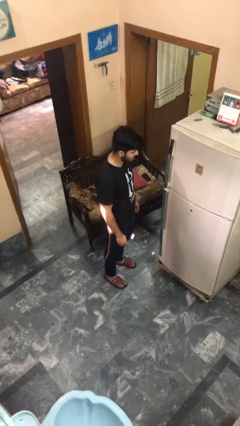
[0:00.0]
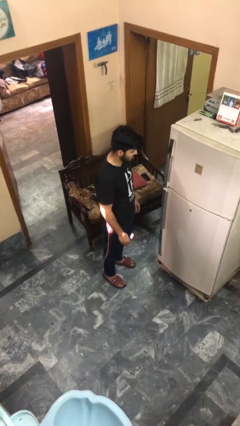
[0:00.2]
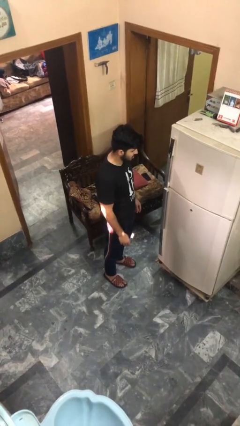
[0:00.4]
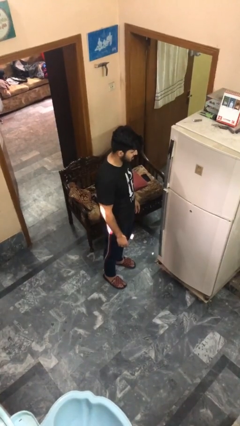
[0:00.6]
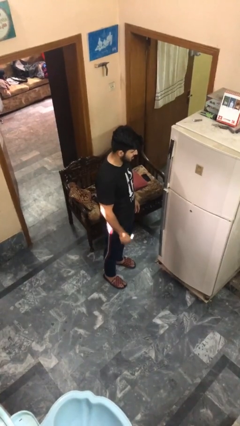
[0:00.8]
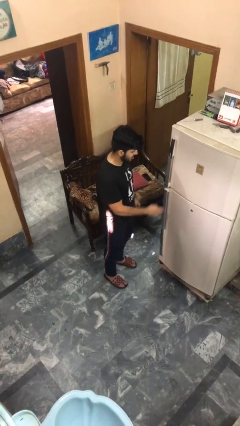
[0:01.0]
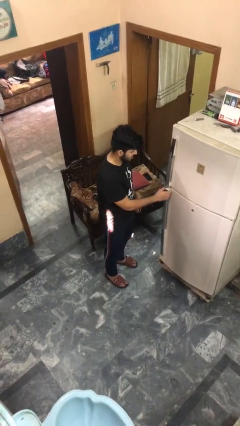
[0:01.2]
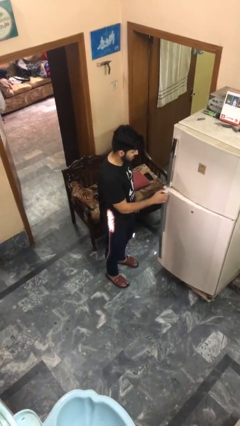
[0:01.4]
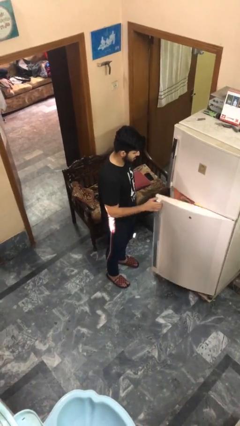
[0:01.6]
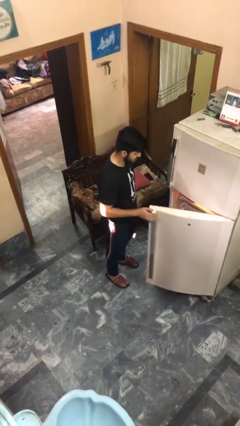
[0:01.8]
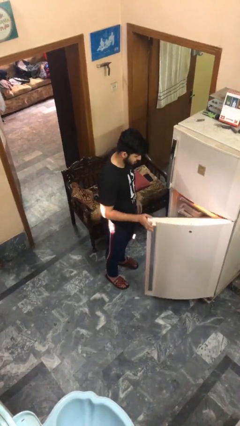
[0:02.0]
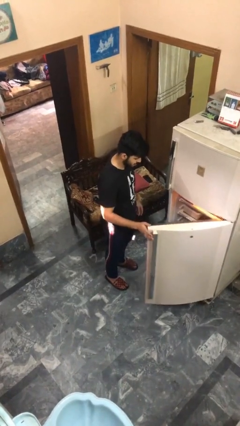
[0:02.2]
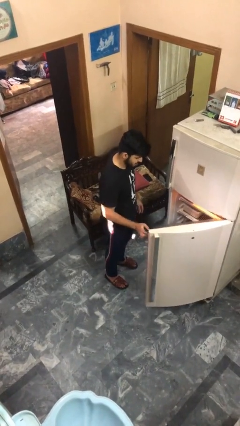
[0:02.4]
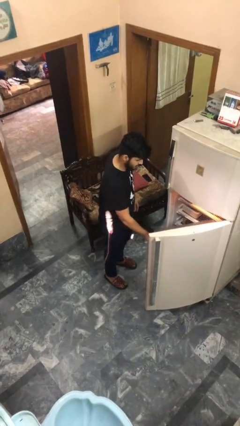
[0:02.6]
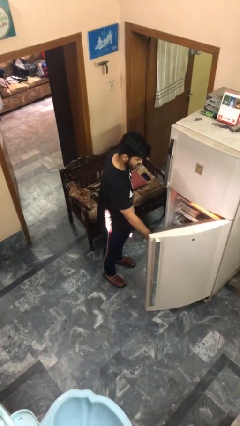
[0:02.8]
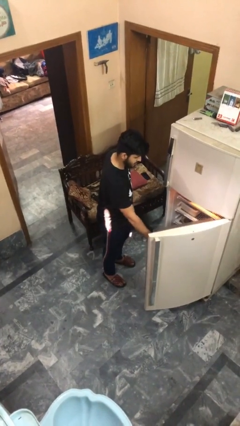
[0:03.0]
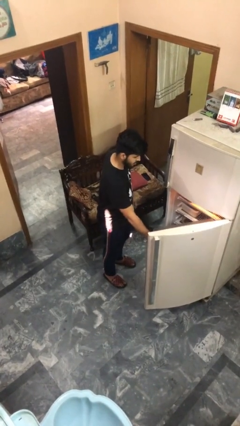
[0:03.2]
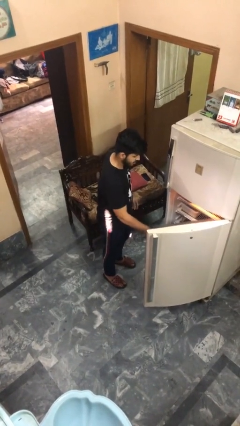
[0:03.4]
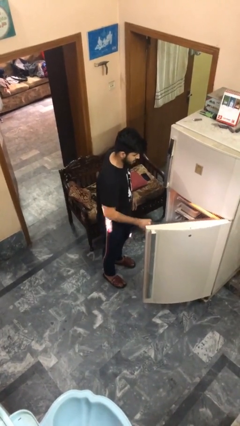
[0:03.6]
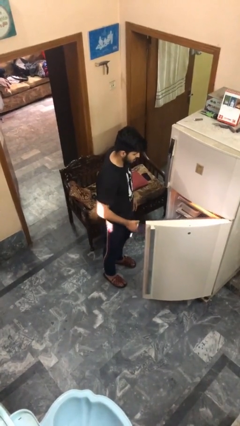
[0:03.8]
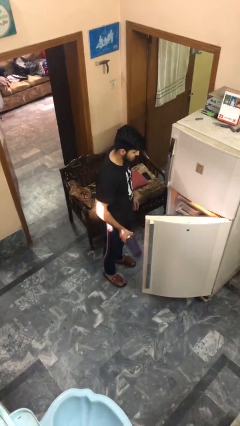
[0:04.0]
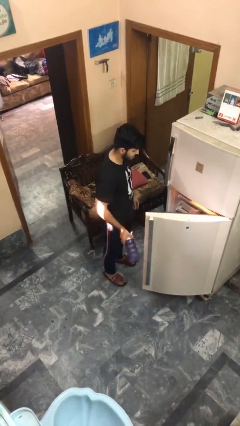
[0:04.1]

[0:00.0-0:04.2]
person takes object from refrigerator

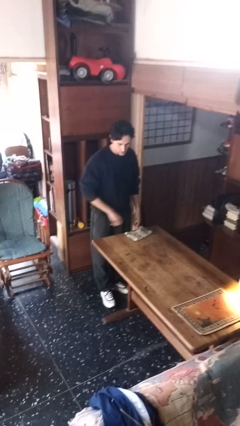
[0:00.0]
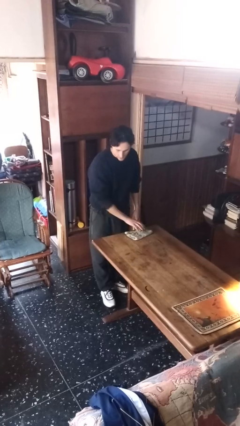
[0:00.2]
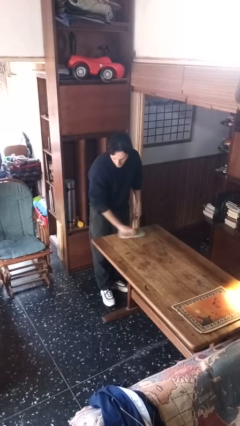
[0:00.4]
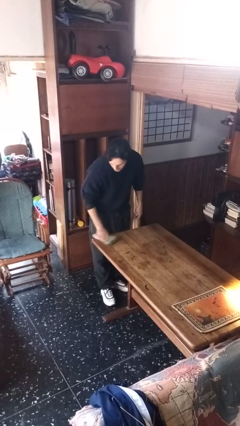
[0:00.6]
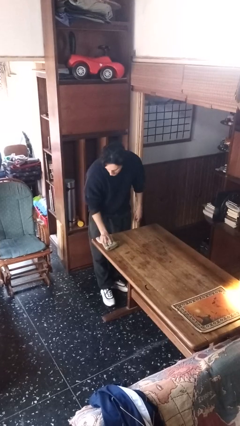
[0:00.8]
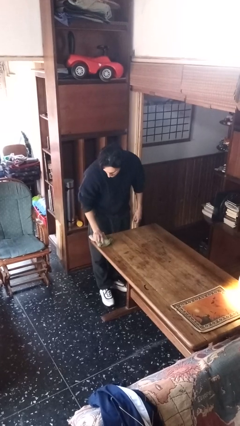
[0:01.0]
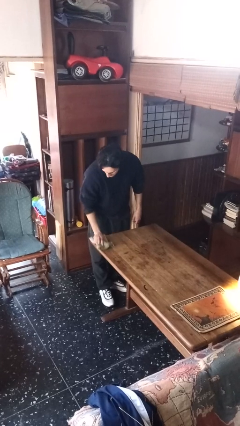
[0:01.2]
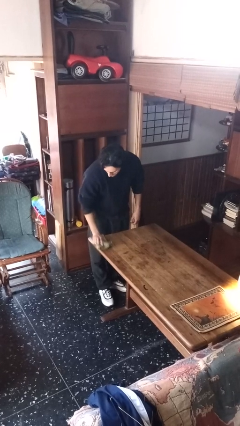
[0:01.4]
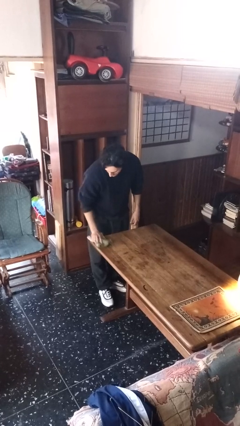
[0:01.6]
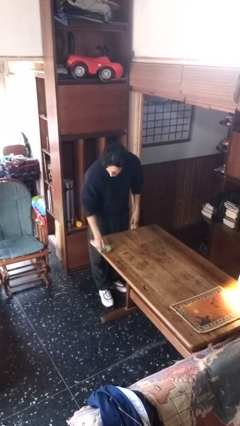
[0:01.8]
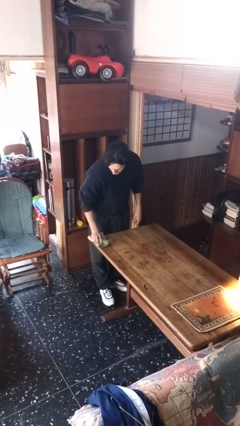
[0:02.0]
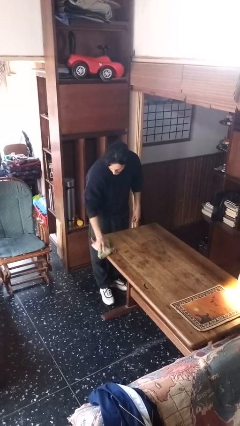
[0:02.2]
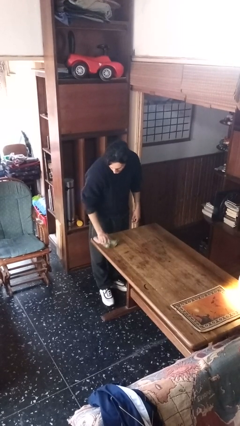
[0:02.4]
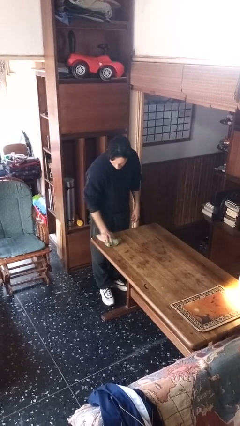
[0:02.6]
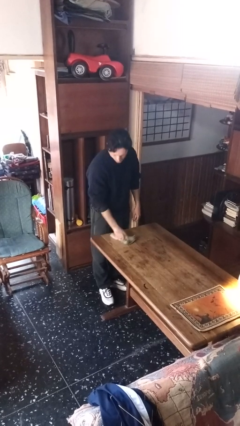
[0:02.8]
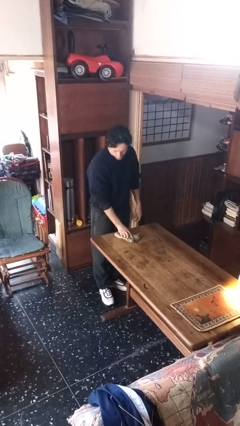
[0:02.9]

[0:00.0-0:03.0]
person cleans table with rag

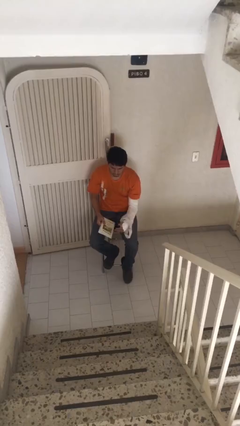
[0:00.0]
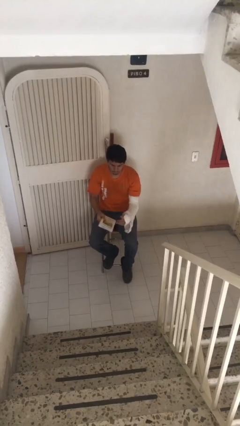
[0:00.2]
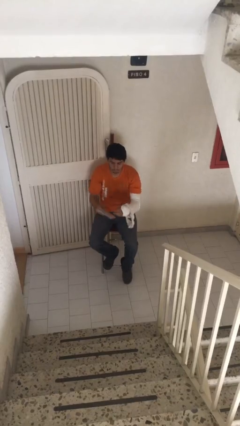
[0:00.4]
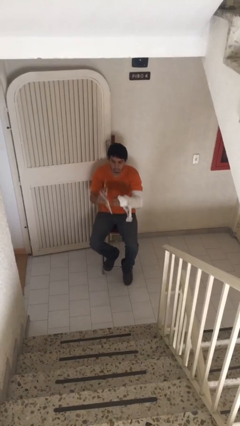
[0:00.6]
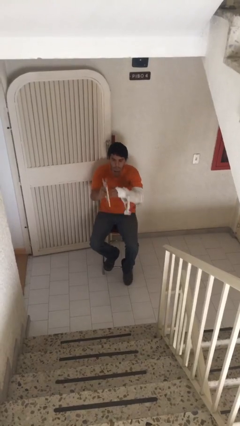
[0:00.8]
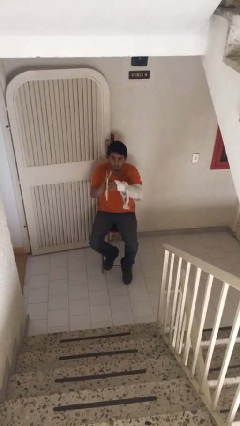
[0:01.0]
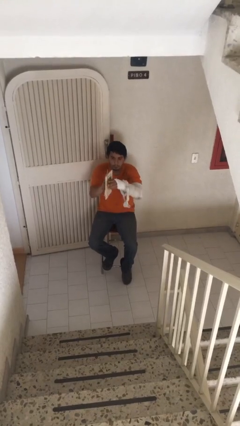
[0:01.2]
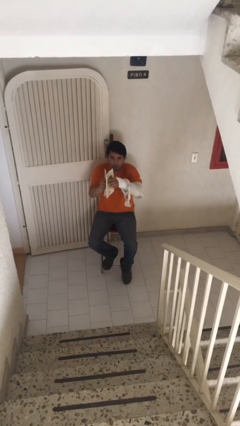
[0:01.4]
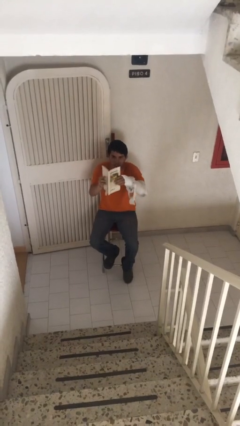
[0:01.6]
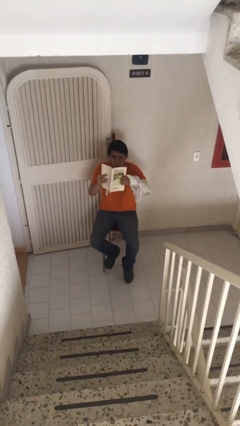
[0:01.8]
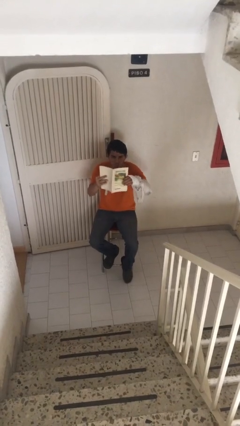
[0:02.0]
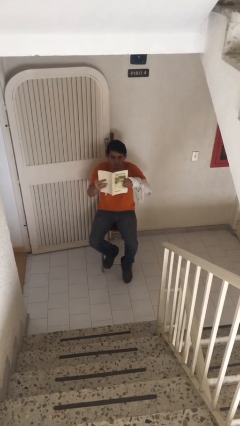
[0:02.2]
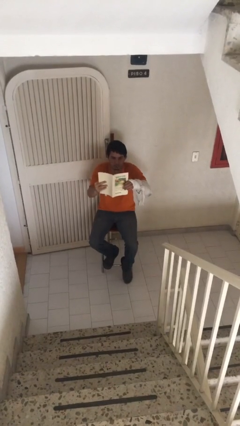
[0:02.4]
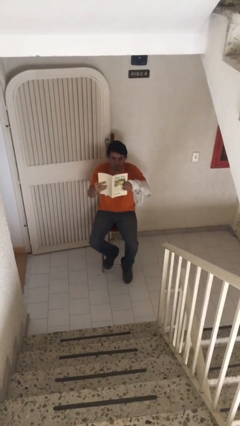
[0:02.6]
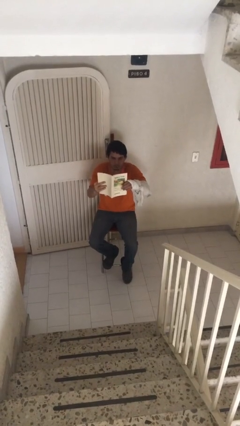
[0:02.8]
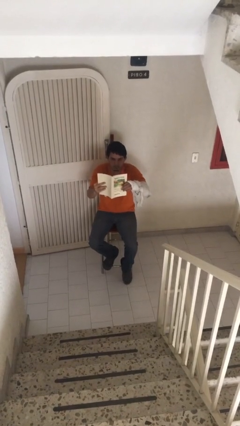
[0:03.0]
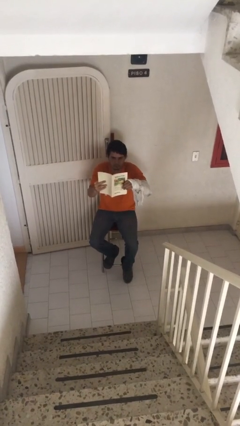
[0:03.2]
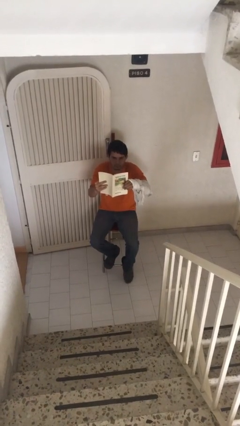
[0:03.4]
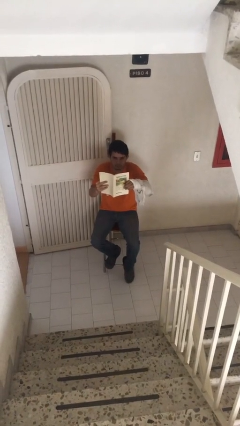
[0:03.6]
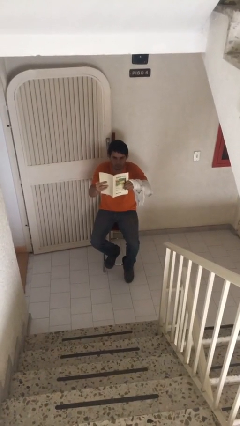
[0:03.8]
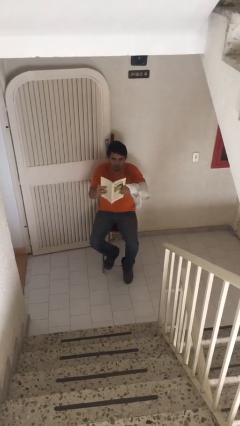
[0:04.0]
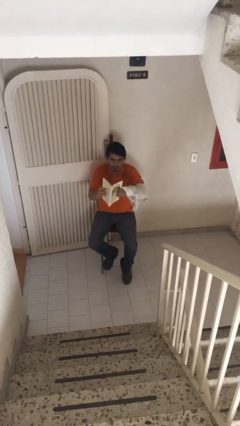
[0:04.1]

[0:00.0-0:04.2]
person reads document

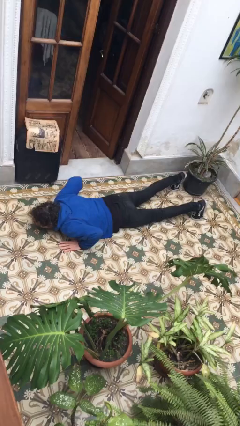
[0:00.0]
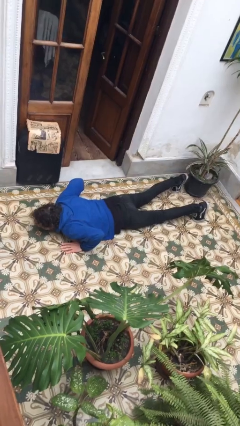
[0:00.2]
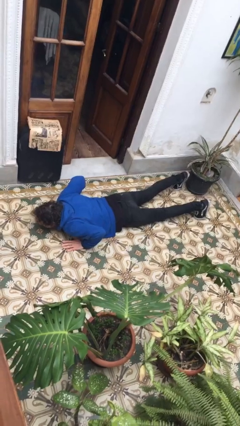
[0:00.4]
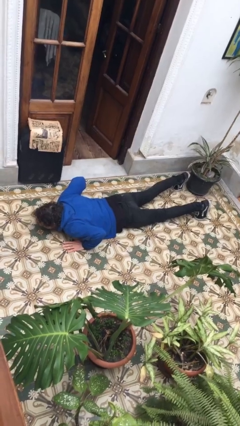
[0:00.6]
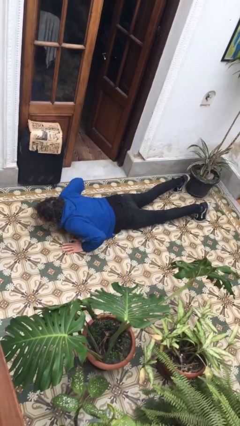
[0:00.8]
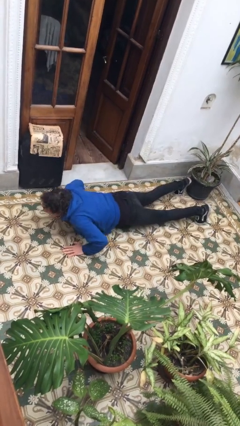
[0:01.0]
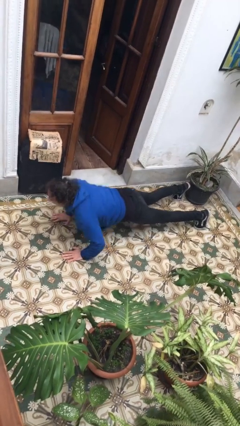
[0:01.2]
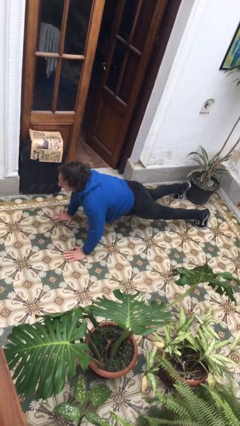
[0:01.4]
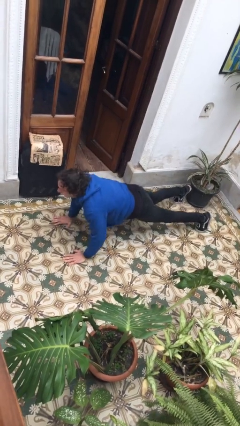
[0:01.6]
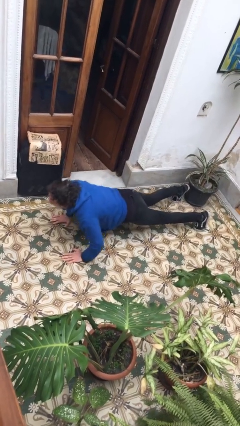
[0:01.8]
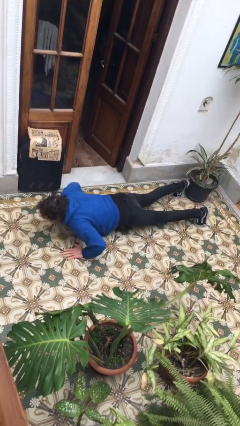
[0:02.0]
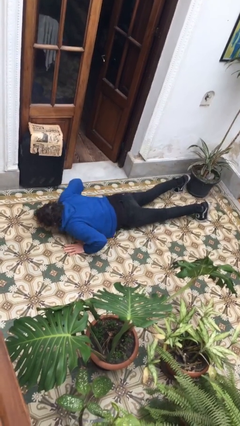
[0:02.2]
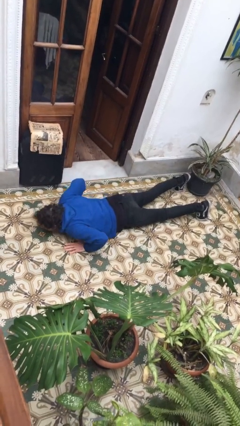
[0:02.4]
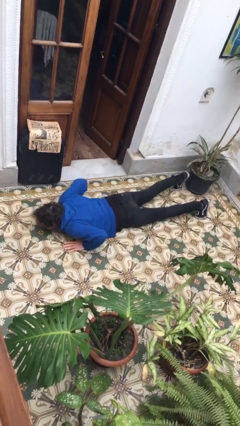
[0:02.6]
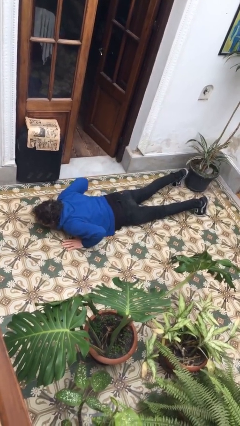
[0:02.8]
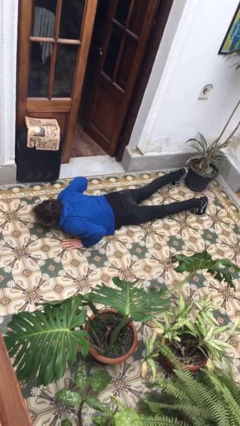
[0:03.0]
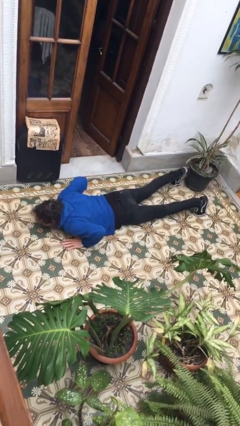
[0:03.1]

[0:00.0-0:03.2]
person exercises with pushup

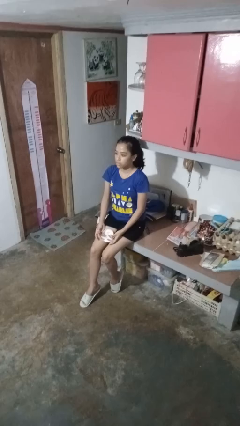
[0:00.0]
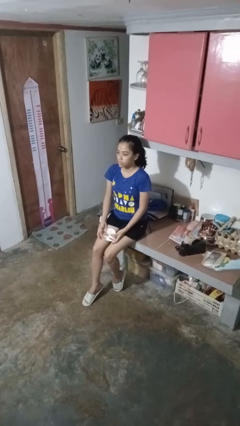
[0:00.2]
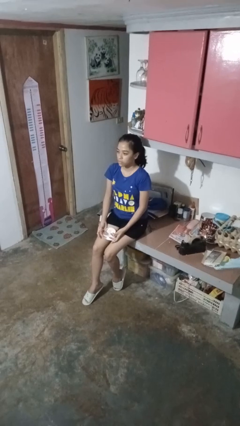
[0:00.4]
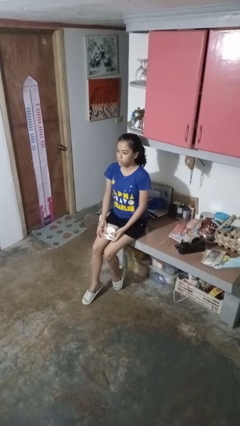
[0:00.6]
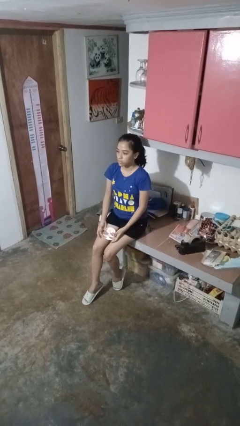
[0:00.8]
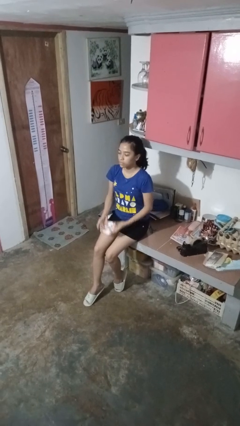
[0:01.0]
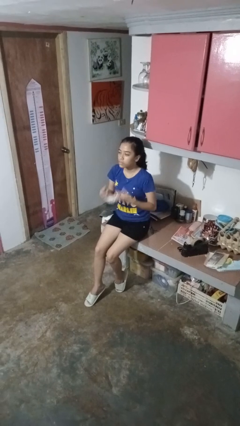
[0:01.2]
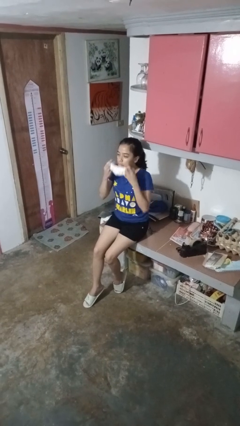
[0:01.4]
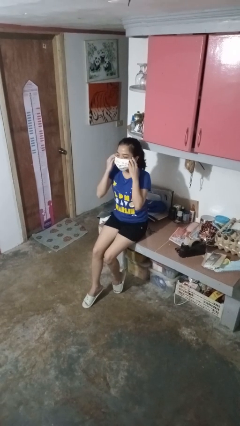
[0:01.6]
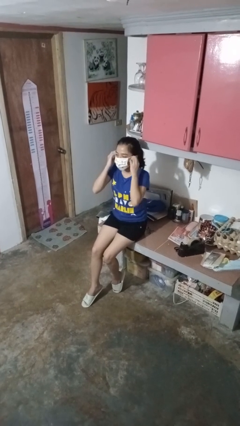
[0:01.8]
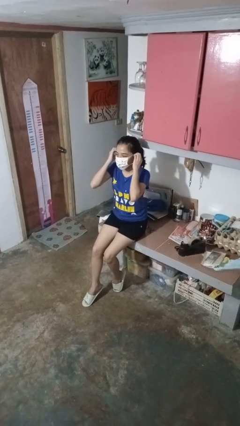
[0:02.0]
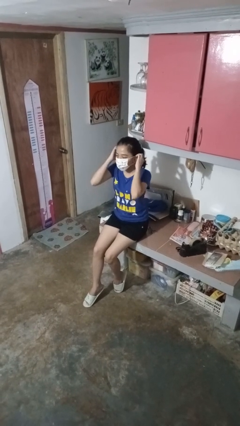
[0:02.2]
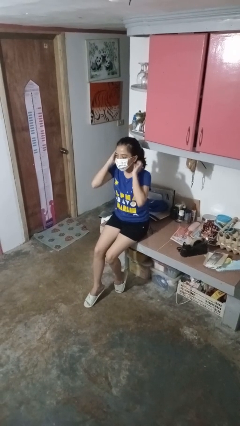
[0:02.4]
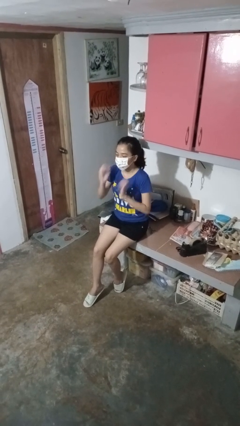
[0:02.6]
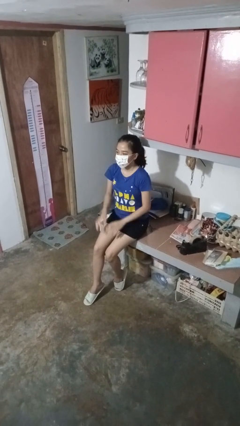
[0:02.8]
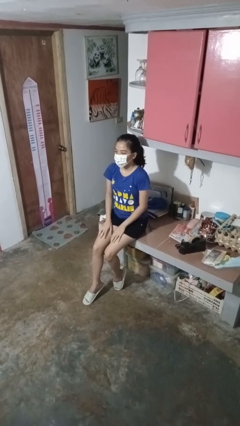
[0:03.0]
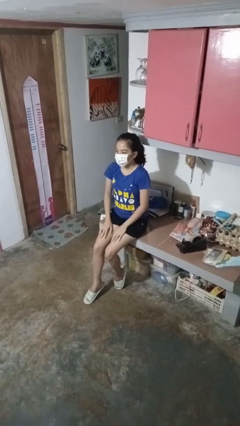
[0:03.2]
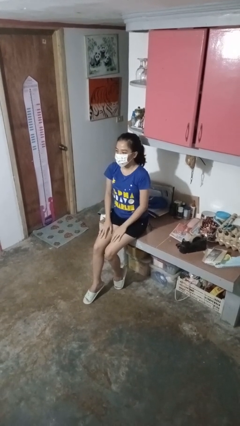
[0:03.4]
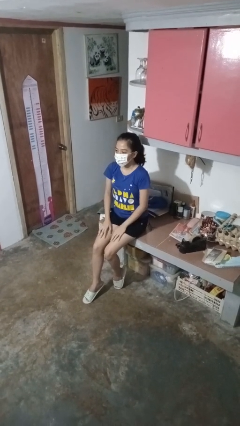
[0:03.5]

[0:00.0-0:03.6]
person puts on facemask
